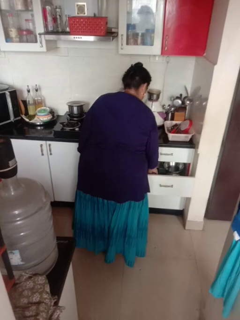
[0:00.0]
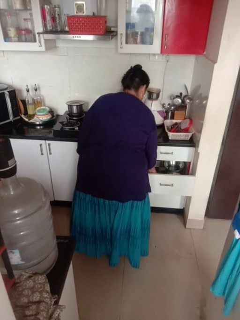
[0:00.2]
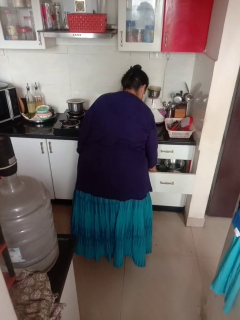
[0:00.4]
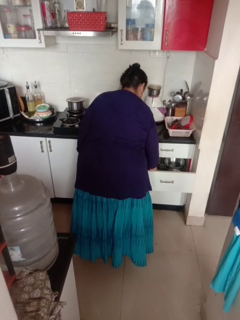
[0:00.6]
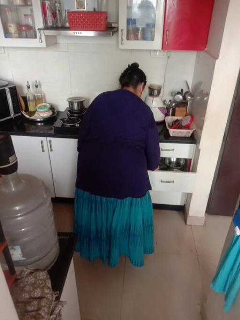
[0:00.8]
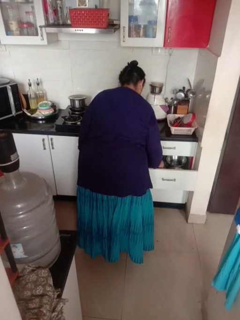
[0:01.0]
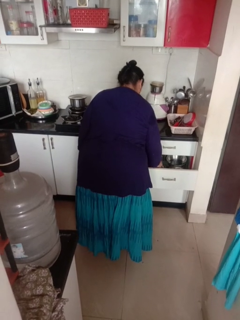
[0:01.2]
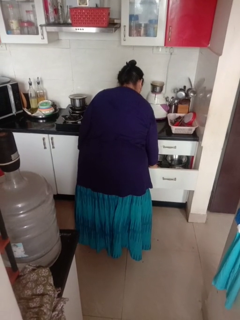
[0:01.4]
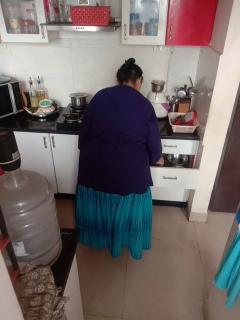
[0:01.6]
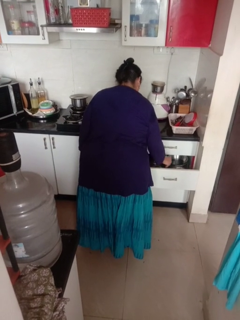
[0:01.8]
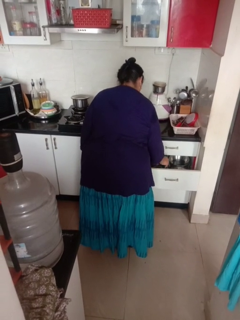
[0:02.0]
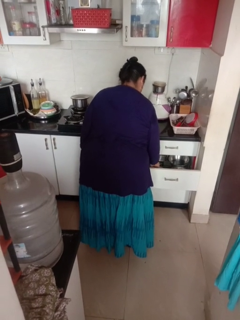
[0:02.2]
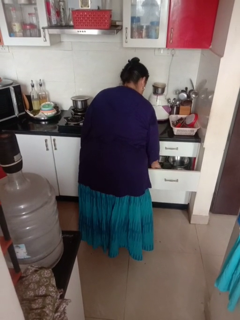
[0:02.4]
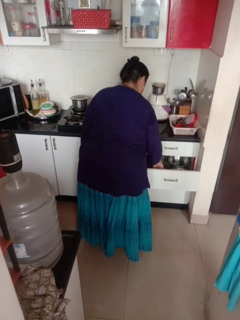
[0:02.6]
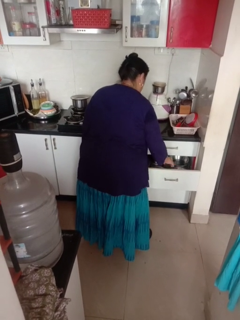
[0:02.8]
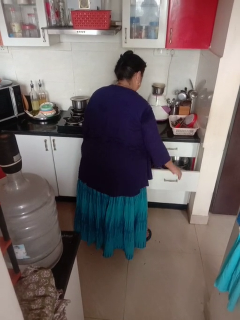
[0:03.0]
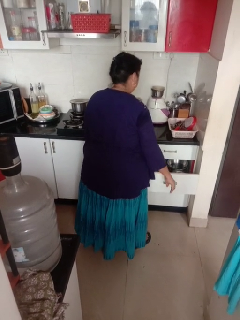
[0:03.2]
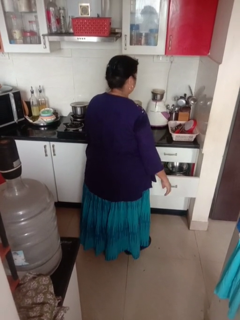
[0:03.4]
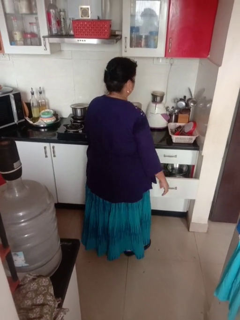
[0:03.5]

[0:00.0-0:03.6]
person searches in kitchen drawer

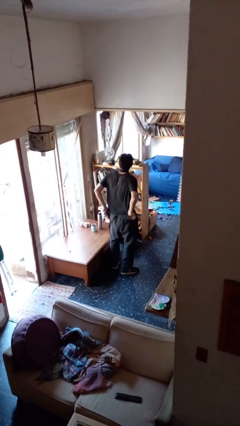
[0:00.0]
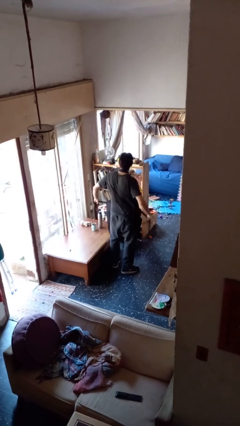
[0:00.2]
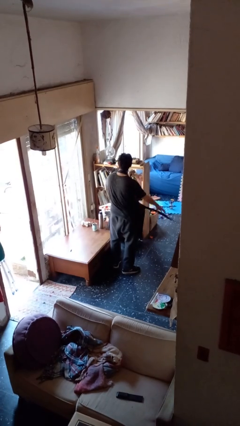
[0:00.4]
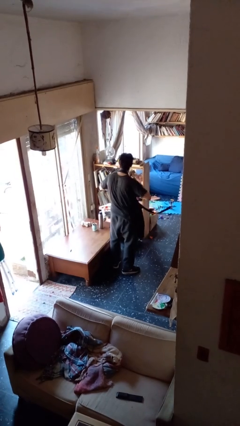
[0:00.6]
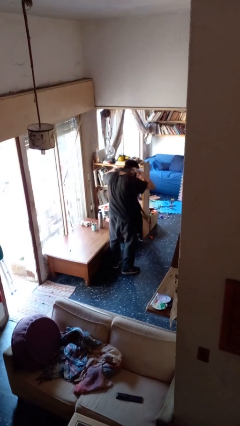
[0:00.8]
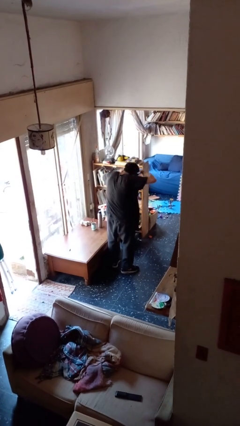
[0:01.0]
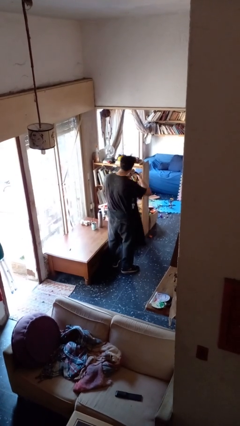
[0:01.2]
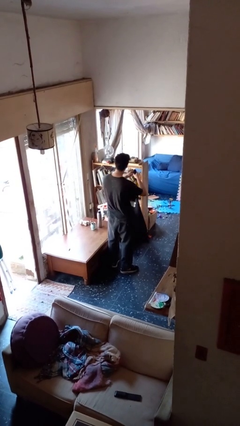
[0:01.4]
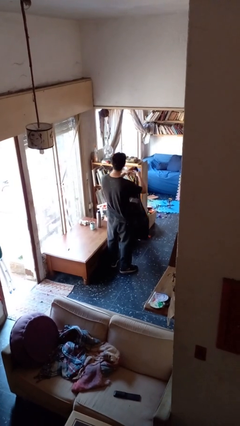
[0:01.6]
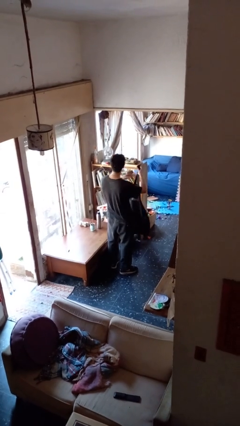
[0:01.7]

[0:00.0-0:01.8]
person takes off apron

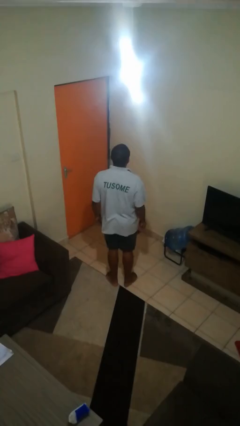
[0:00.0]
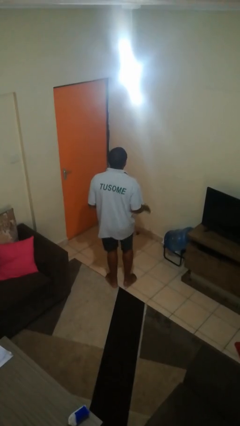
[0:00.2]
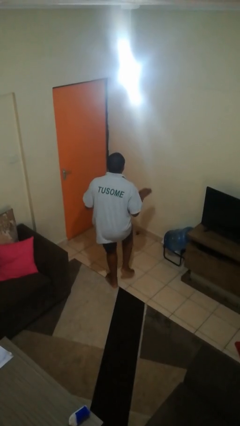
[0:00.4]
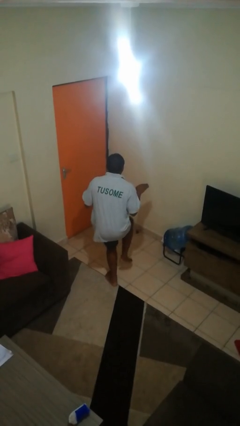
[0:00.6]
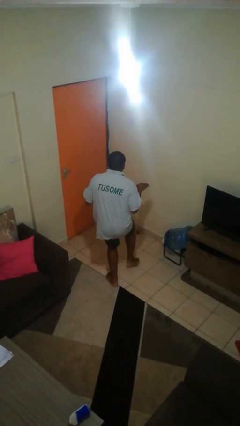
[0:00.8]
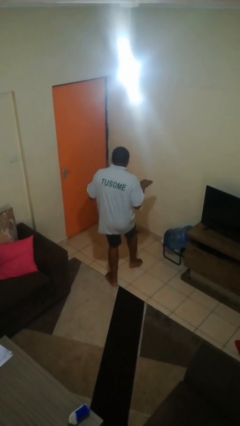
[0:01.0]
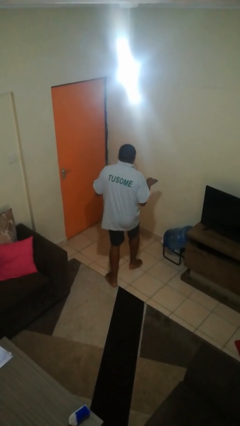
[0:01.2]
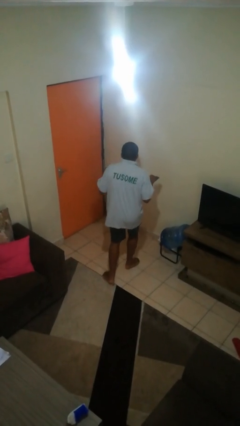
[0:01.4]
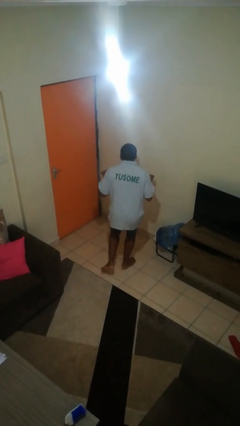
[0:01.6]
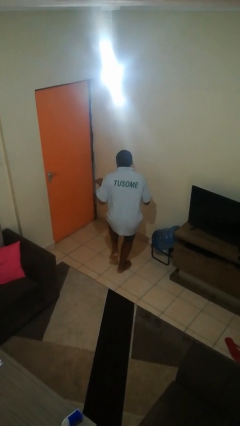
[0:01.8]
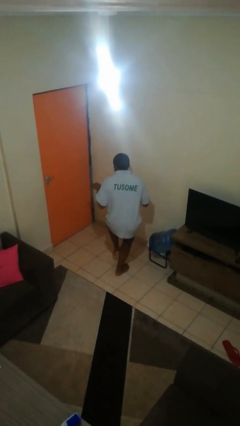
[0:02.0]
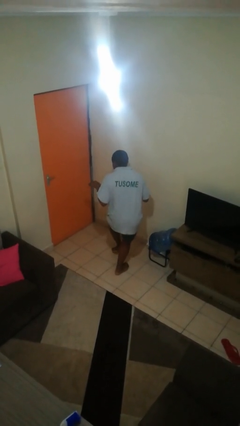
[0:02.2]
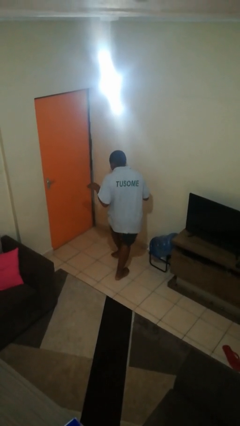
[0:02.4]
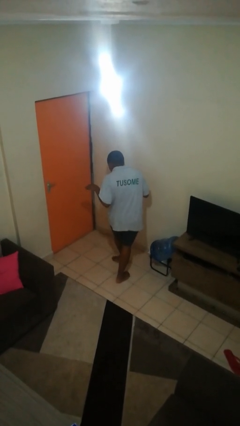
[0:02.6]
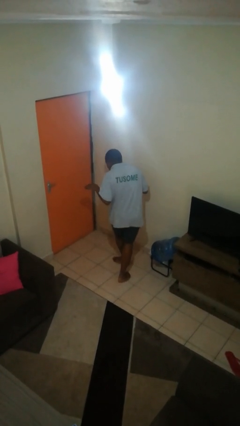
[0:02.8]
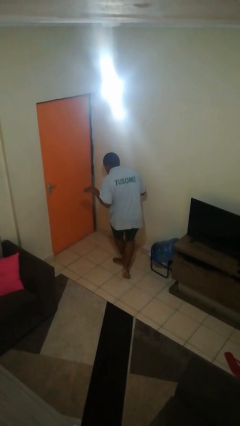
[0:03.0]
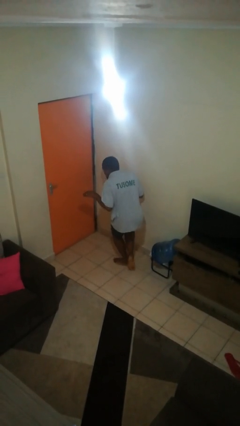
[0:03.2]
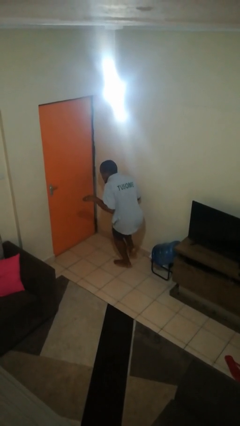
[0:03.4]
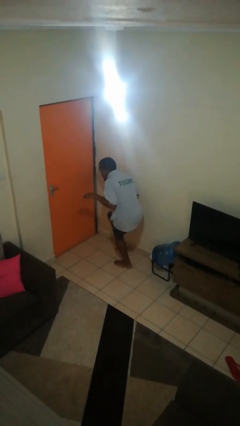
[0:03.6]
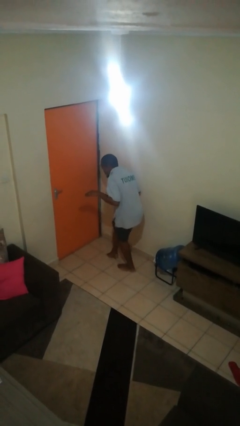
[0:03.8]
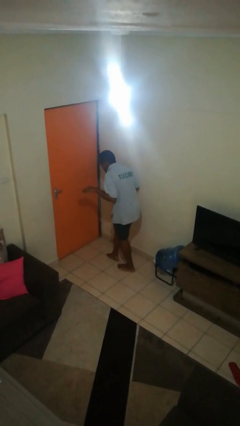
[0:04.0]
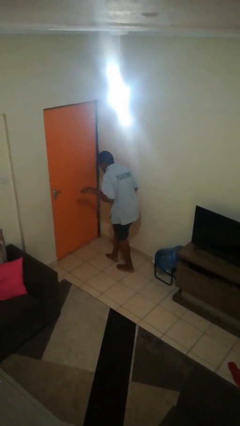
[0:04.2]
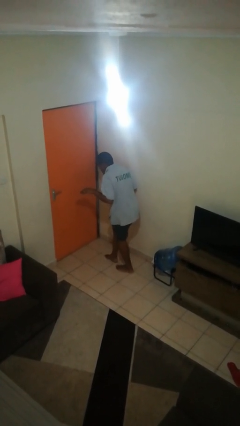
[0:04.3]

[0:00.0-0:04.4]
person walks tiptoe

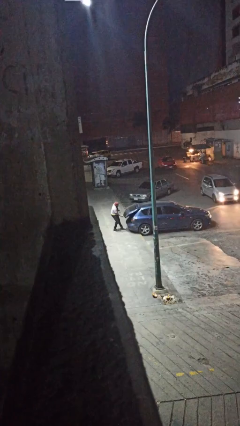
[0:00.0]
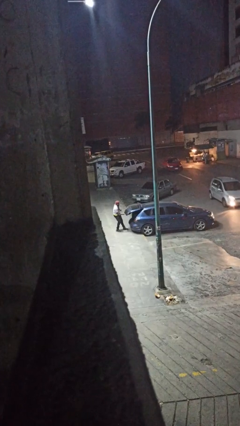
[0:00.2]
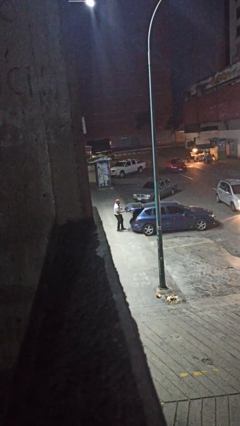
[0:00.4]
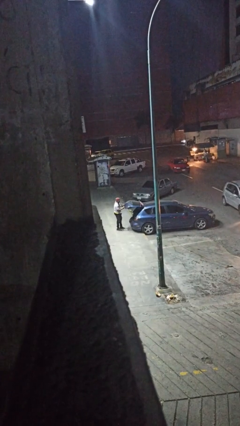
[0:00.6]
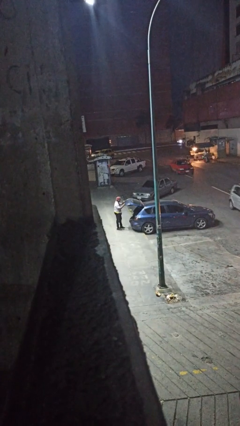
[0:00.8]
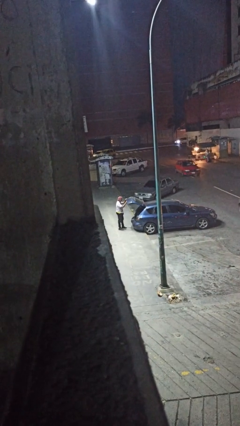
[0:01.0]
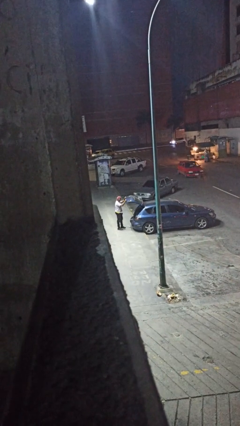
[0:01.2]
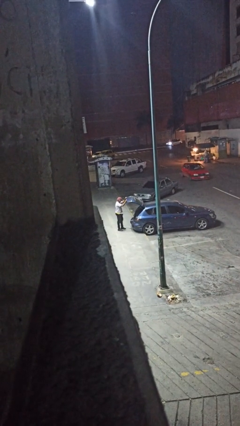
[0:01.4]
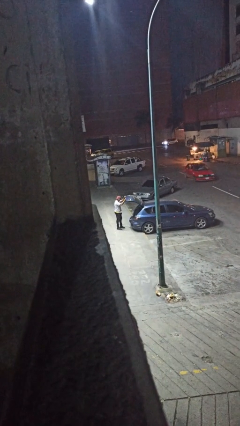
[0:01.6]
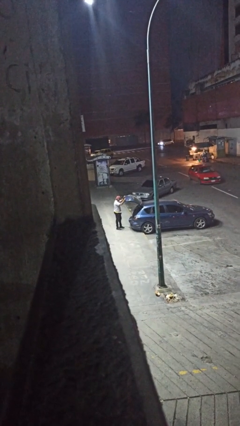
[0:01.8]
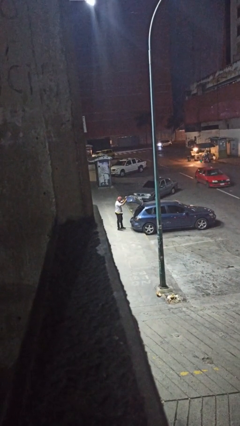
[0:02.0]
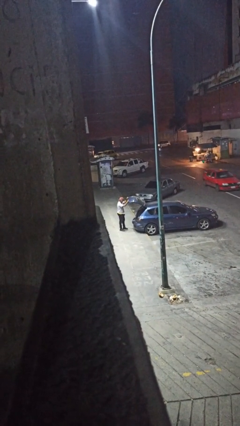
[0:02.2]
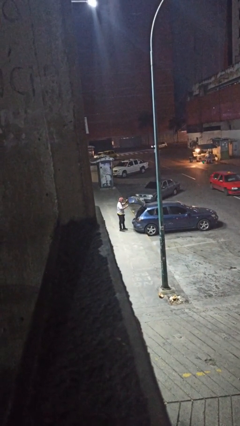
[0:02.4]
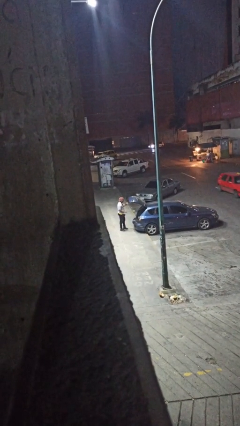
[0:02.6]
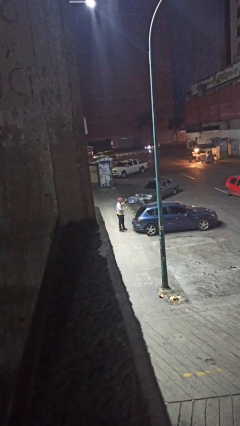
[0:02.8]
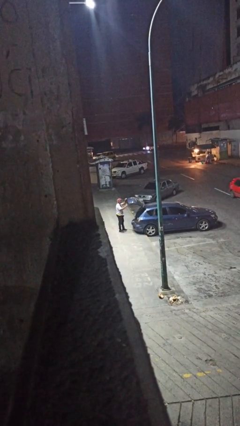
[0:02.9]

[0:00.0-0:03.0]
person opens car trunk

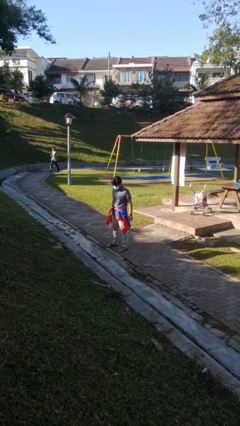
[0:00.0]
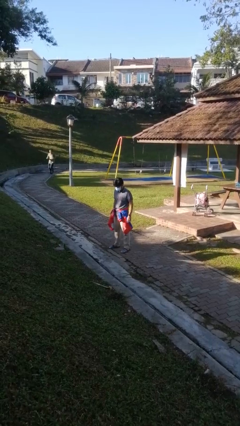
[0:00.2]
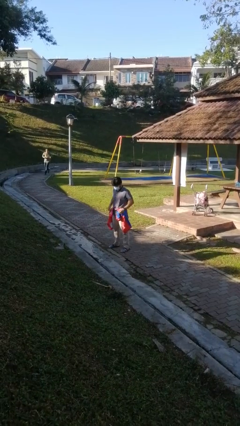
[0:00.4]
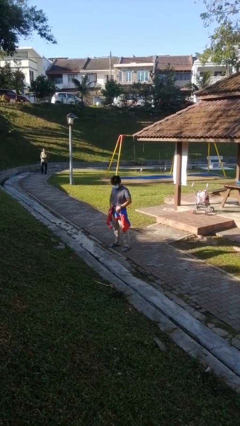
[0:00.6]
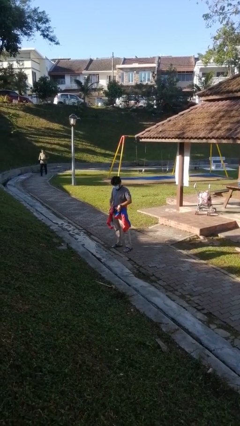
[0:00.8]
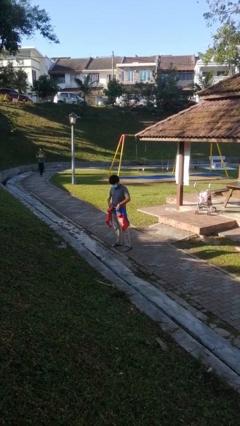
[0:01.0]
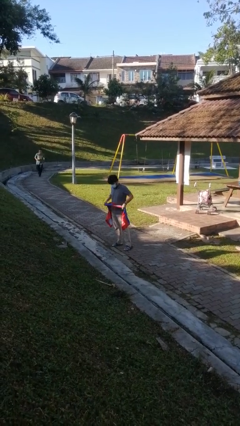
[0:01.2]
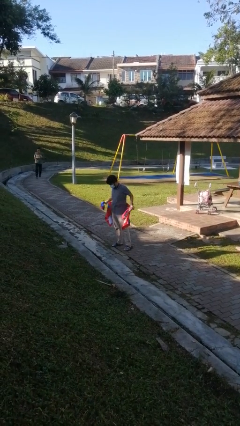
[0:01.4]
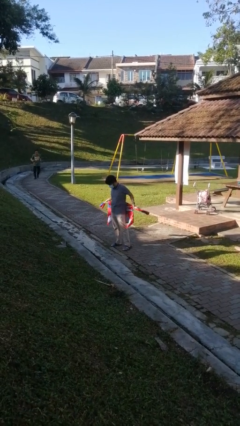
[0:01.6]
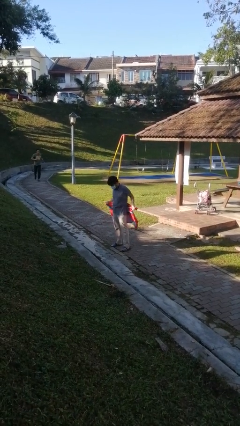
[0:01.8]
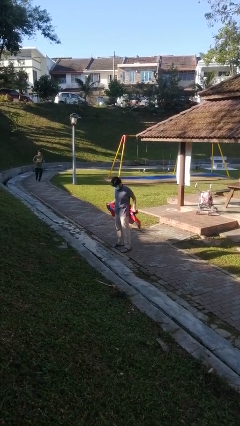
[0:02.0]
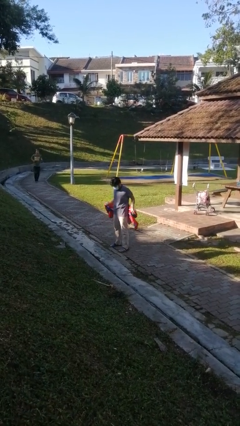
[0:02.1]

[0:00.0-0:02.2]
person unties jacket around waist

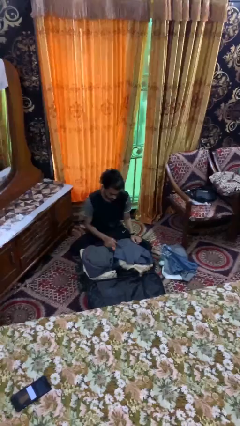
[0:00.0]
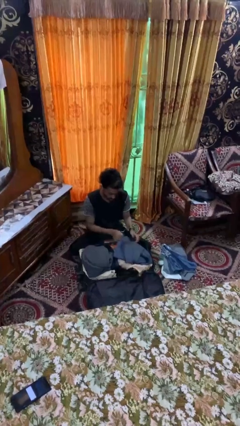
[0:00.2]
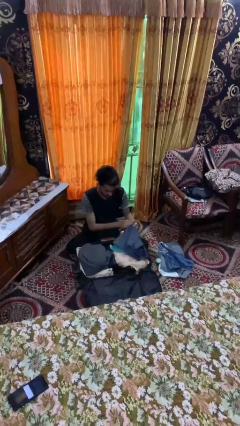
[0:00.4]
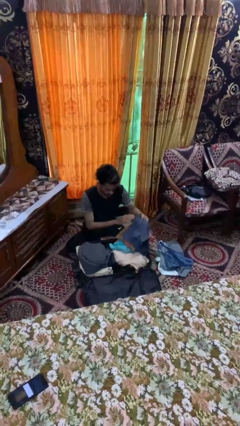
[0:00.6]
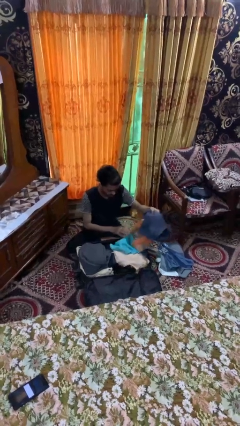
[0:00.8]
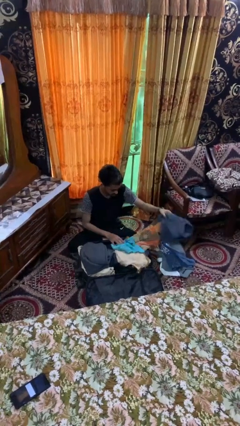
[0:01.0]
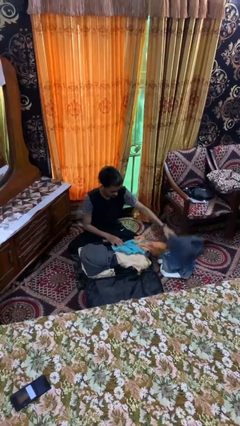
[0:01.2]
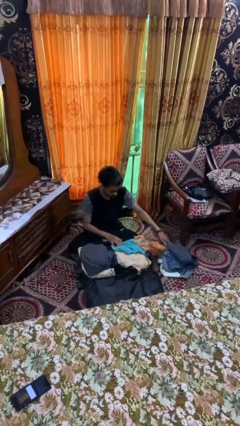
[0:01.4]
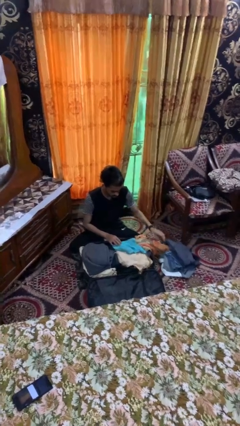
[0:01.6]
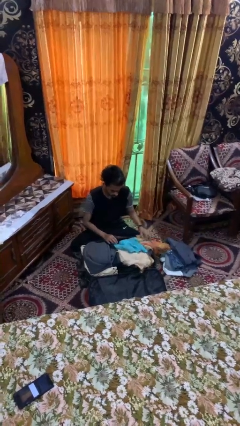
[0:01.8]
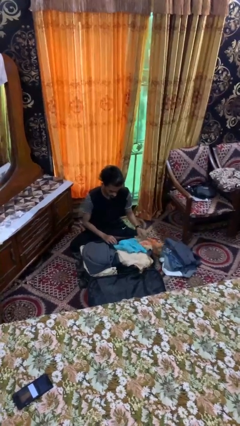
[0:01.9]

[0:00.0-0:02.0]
person unloads clothes from suitcase

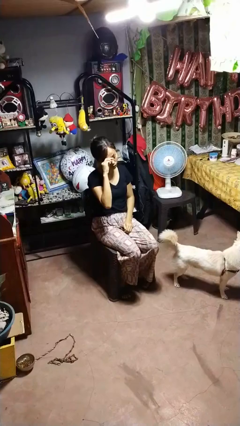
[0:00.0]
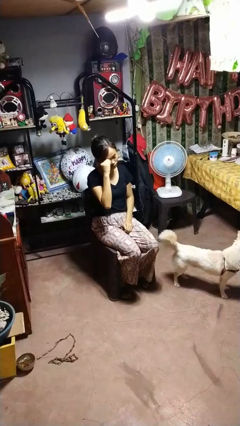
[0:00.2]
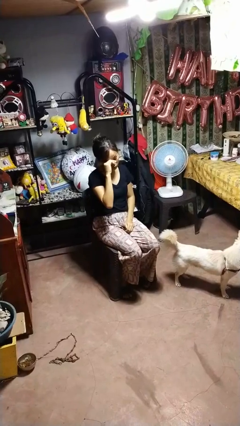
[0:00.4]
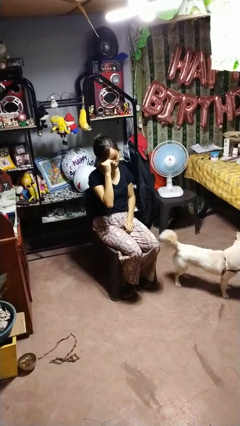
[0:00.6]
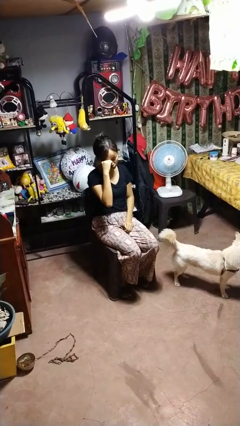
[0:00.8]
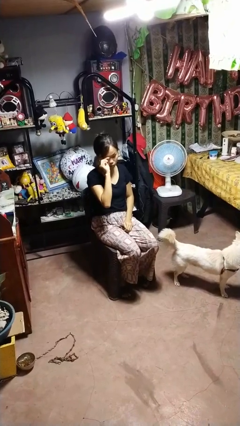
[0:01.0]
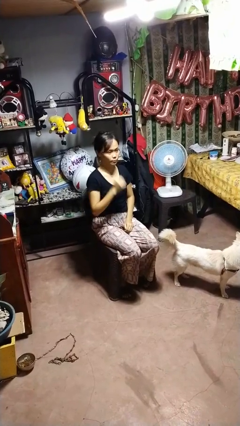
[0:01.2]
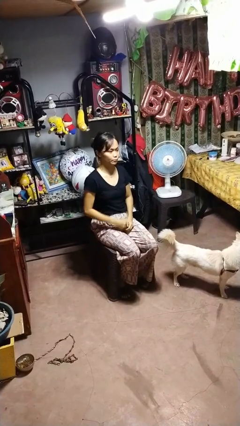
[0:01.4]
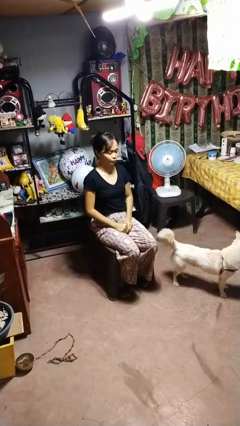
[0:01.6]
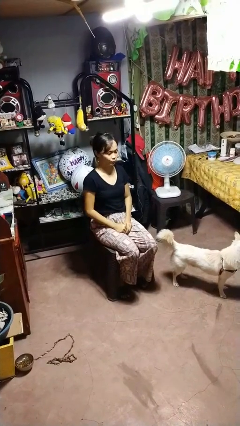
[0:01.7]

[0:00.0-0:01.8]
person rubs eyes
